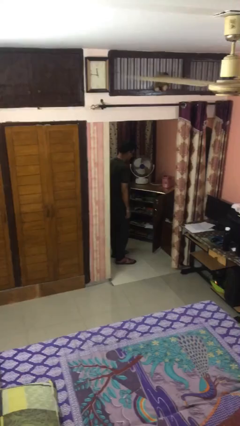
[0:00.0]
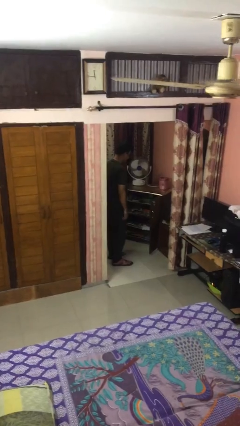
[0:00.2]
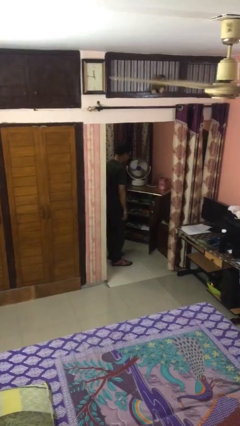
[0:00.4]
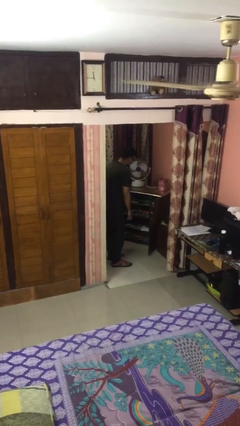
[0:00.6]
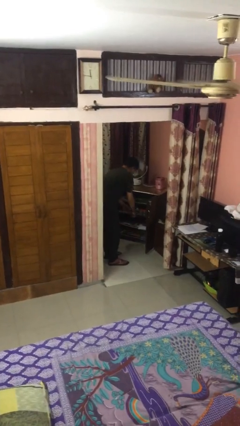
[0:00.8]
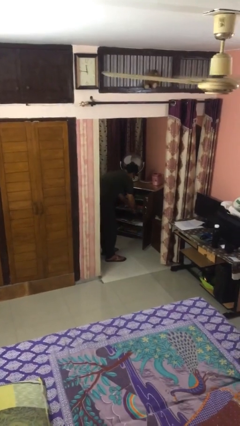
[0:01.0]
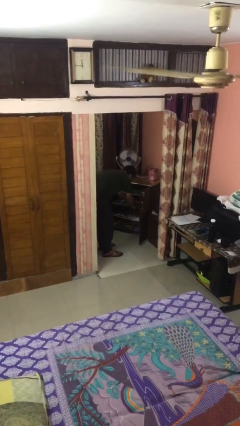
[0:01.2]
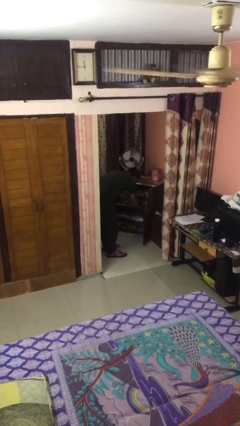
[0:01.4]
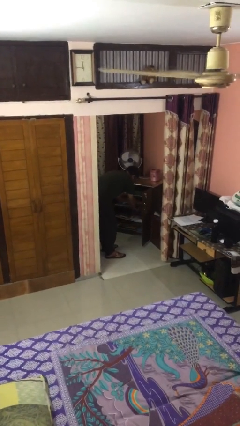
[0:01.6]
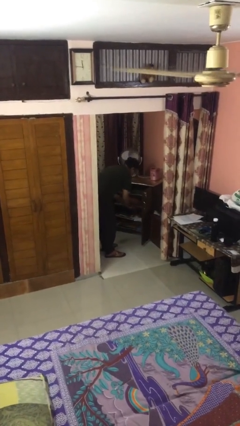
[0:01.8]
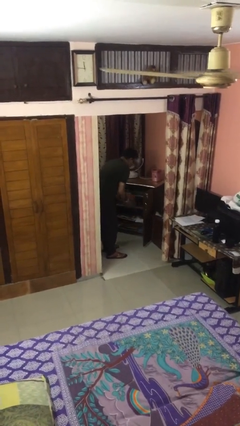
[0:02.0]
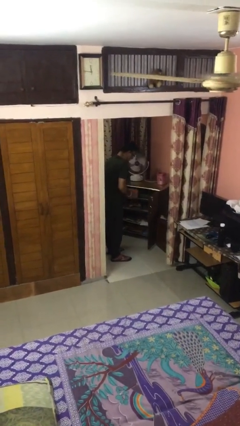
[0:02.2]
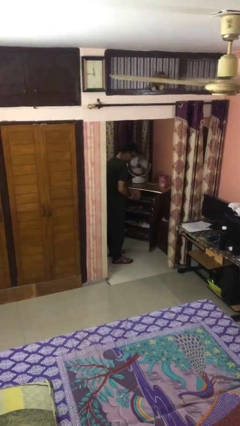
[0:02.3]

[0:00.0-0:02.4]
person picks up object from cabinet

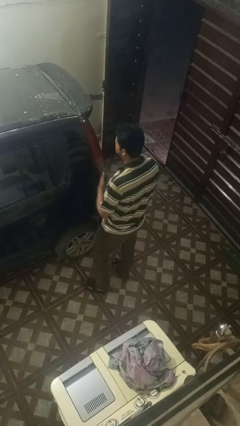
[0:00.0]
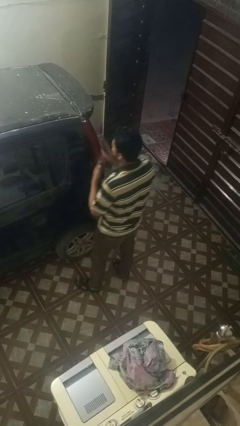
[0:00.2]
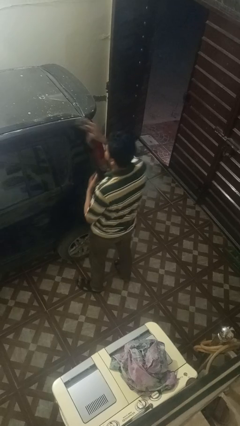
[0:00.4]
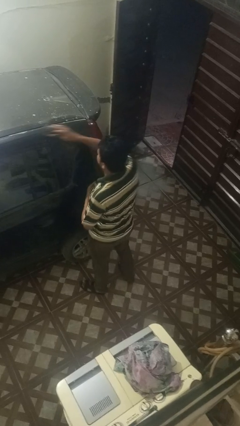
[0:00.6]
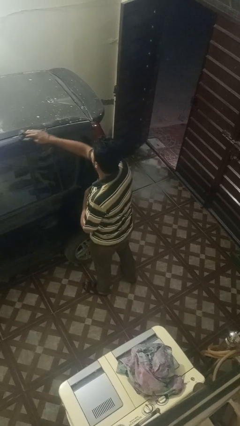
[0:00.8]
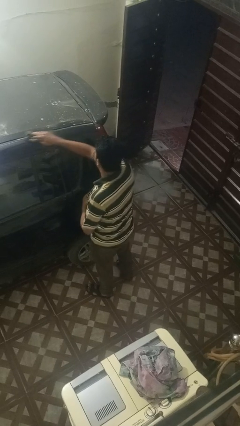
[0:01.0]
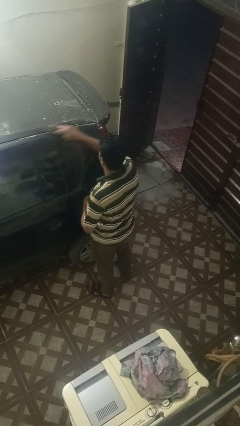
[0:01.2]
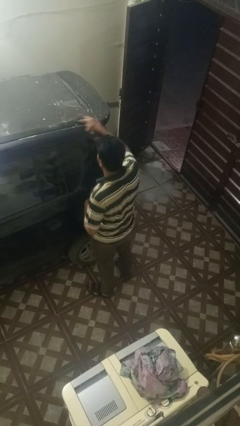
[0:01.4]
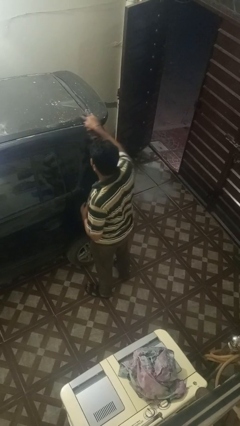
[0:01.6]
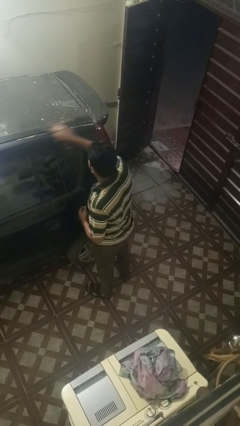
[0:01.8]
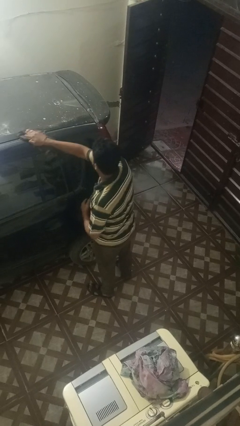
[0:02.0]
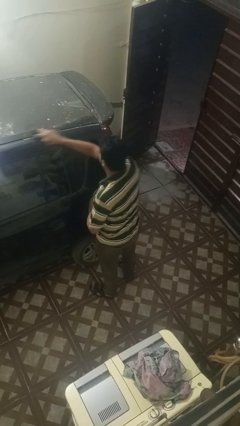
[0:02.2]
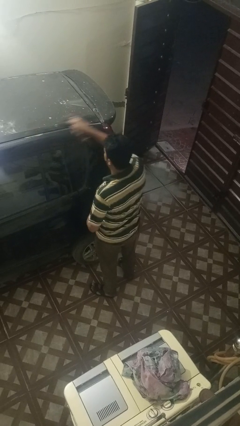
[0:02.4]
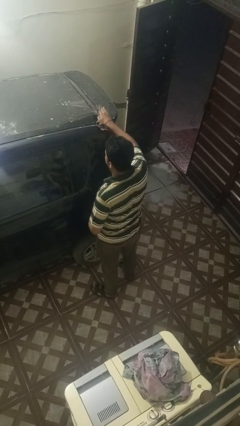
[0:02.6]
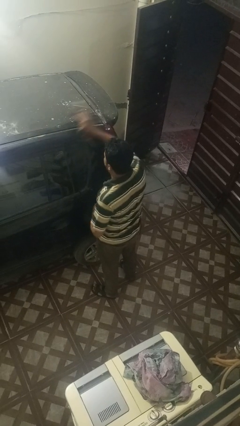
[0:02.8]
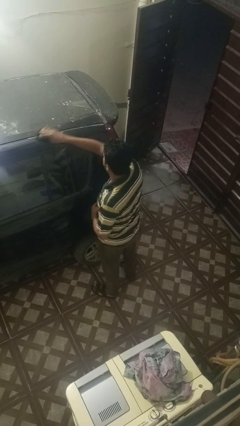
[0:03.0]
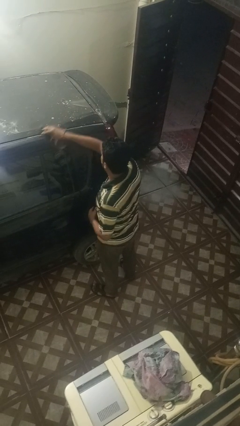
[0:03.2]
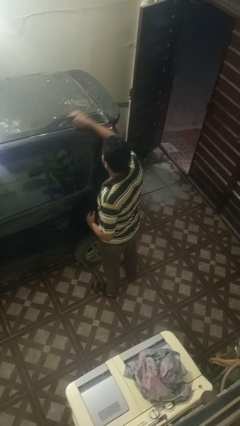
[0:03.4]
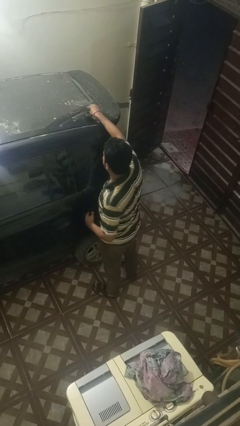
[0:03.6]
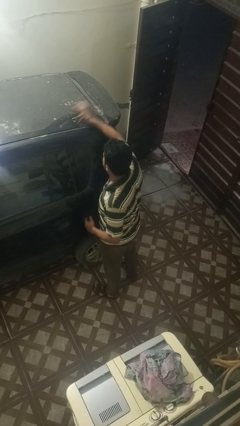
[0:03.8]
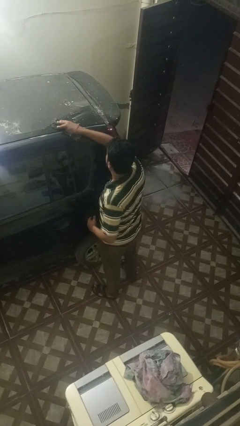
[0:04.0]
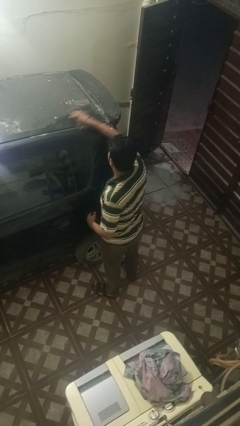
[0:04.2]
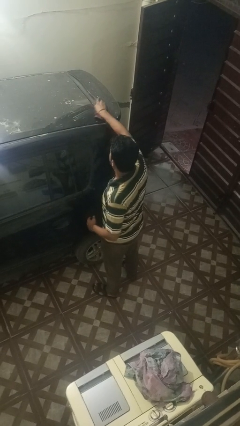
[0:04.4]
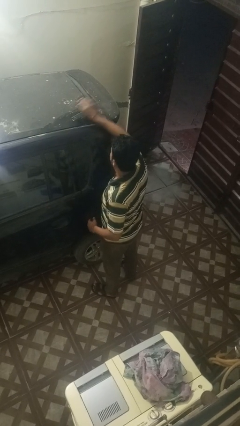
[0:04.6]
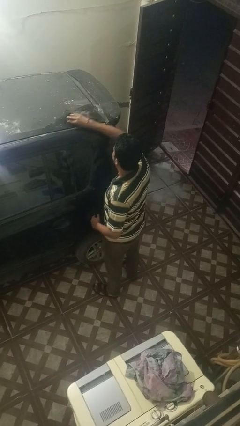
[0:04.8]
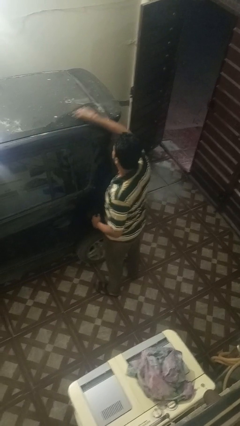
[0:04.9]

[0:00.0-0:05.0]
person polishes car with rag

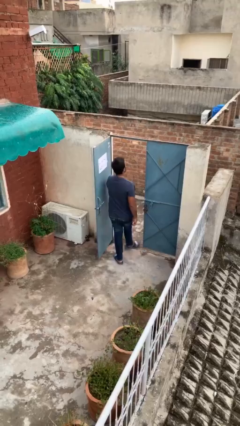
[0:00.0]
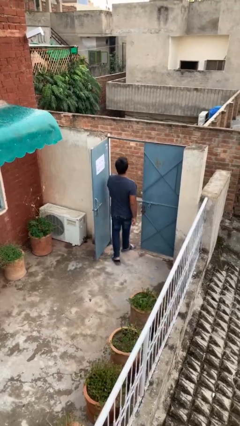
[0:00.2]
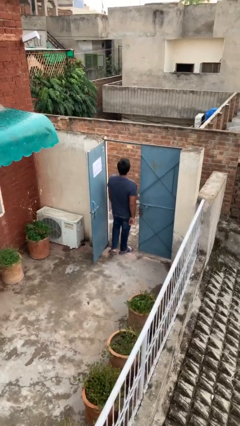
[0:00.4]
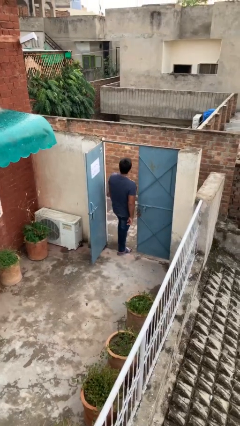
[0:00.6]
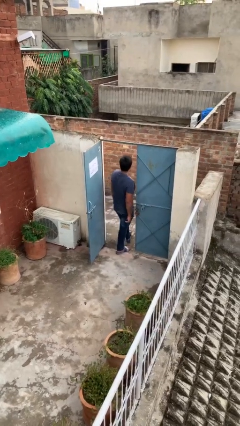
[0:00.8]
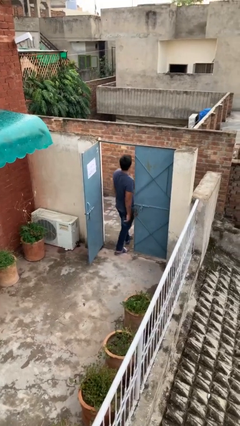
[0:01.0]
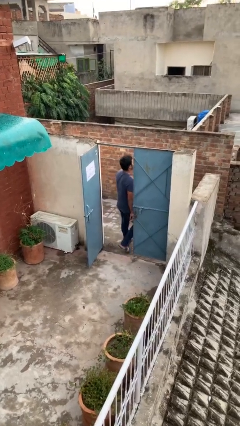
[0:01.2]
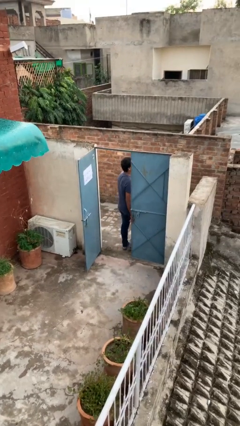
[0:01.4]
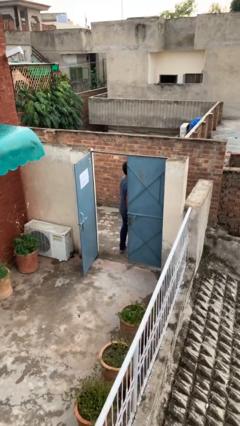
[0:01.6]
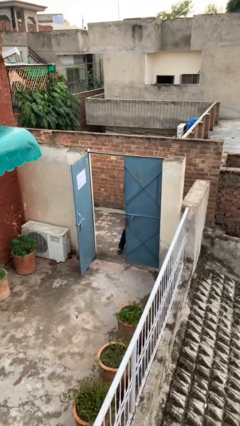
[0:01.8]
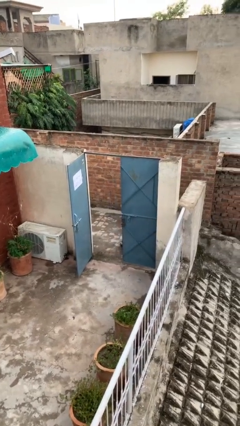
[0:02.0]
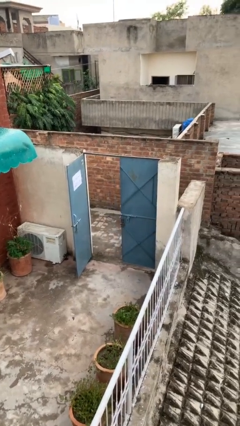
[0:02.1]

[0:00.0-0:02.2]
person exits scene through structure

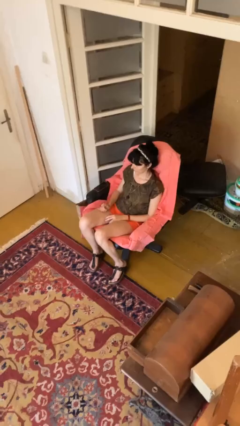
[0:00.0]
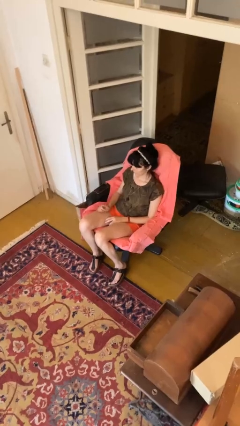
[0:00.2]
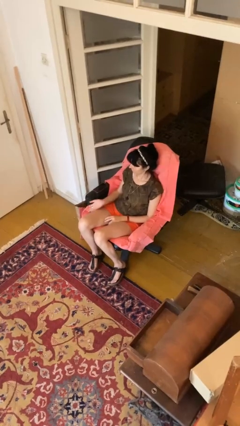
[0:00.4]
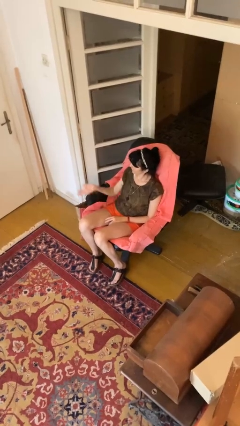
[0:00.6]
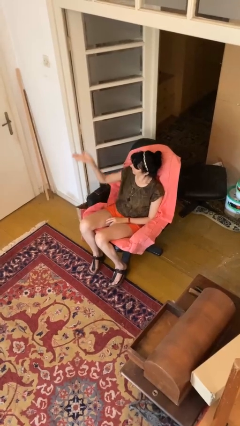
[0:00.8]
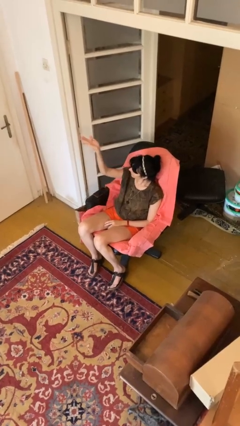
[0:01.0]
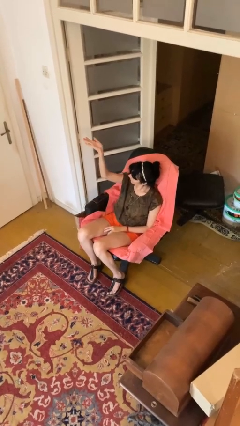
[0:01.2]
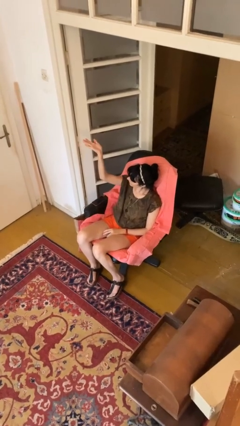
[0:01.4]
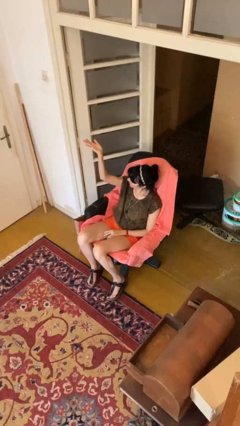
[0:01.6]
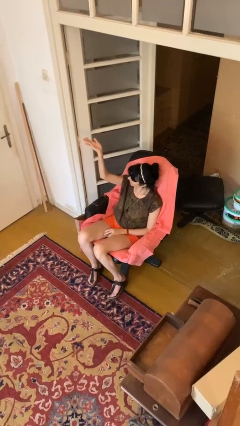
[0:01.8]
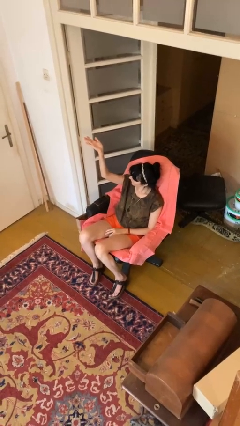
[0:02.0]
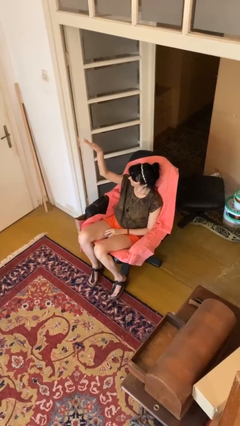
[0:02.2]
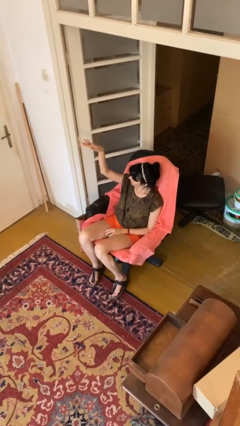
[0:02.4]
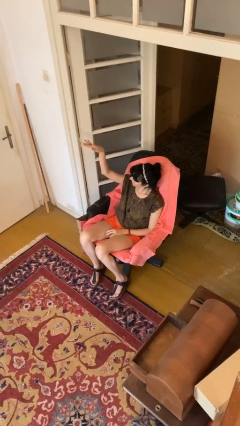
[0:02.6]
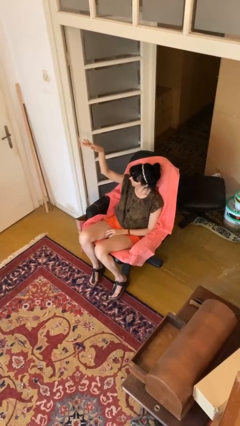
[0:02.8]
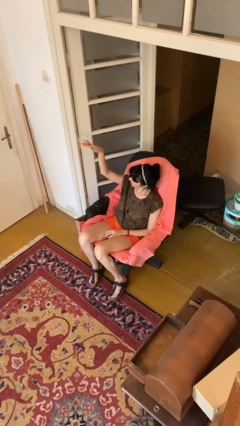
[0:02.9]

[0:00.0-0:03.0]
person gestures swipe up

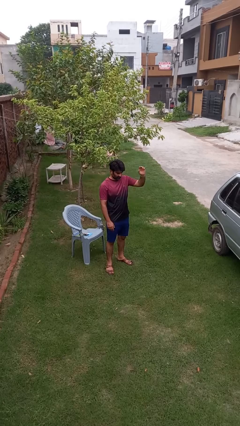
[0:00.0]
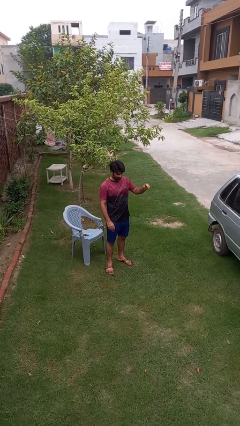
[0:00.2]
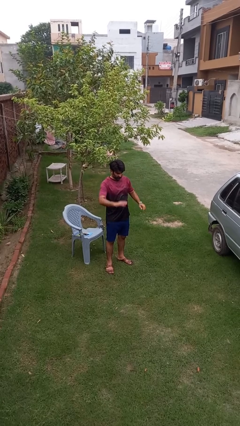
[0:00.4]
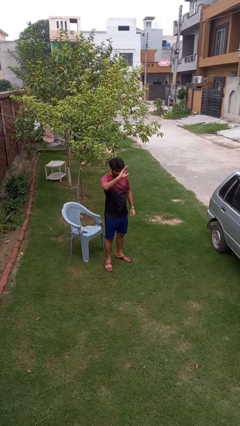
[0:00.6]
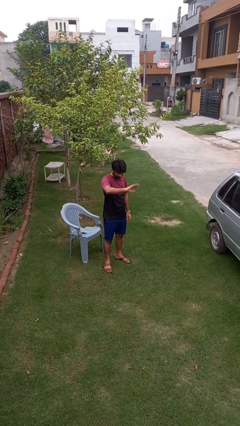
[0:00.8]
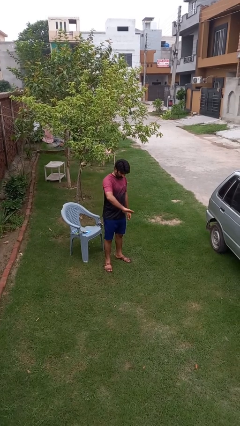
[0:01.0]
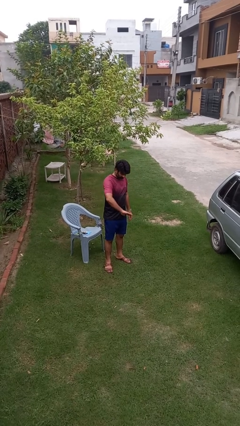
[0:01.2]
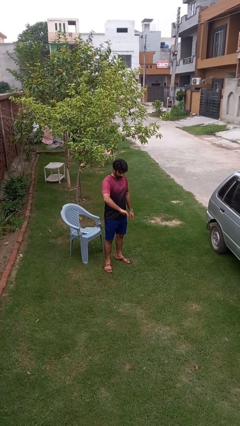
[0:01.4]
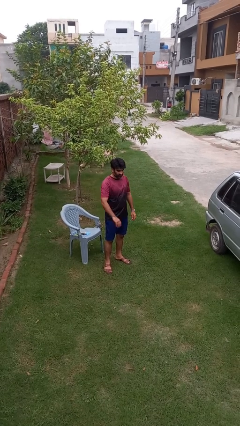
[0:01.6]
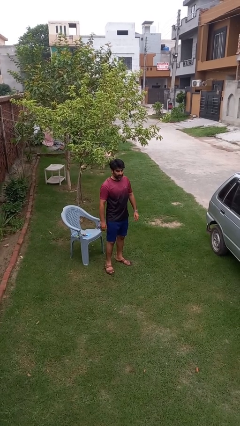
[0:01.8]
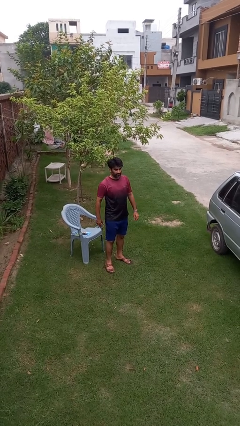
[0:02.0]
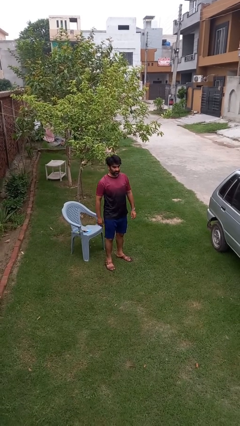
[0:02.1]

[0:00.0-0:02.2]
person gestures swipe down

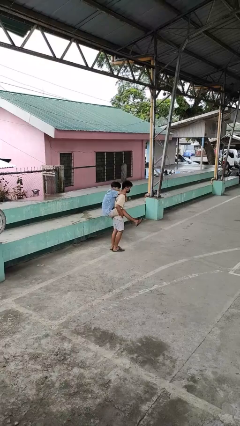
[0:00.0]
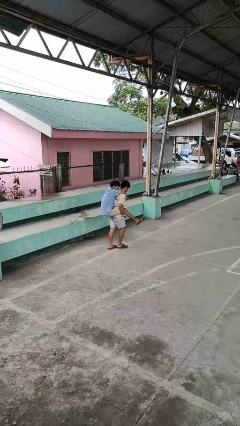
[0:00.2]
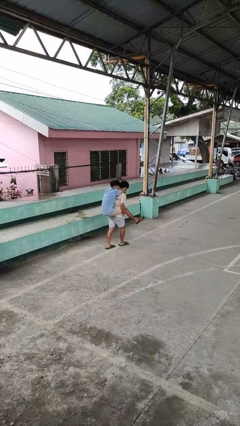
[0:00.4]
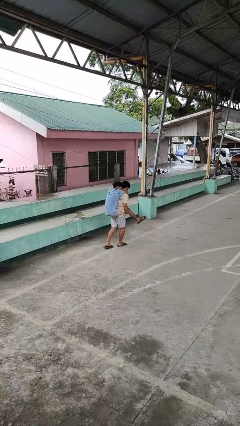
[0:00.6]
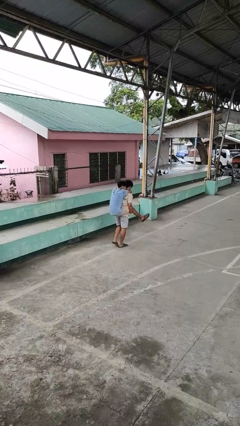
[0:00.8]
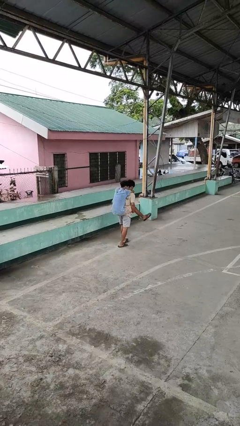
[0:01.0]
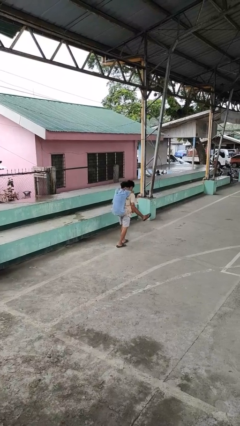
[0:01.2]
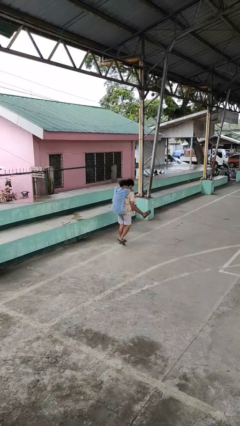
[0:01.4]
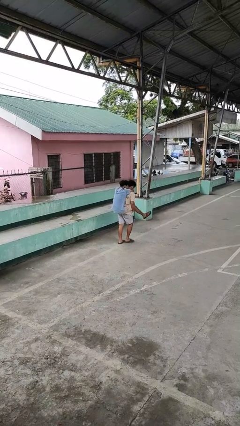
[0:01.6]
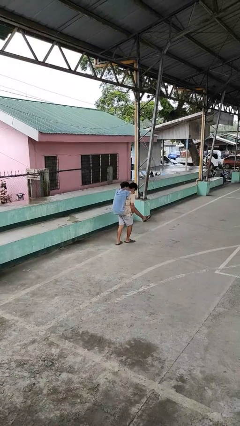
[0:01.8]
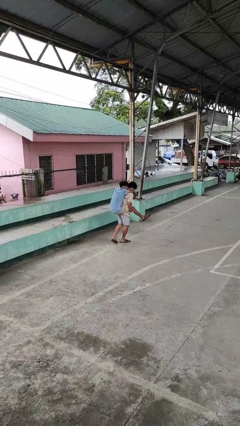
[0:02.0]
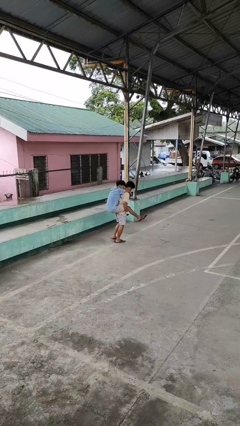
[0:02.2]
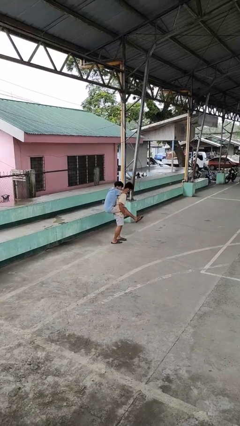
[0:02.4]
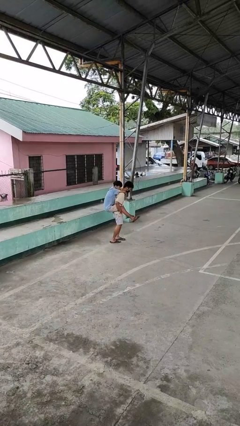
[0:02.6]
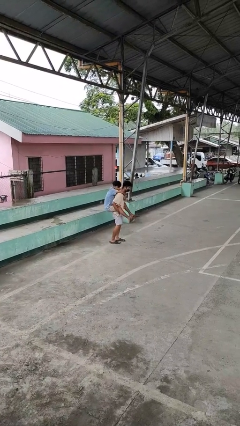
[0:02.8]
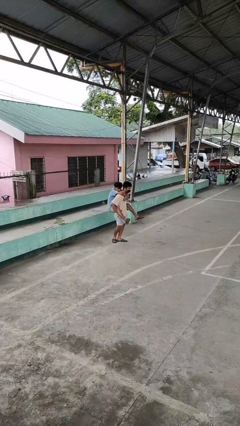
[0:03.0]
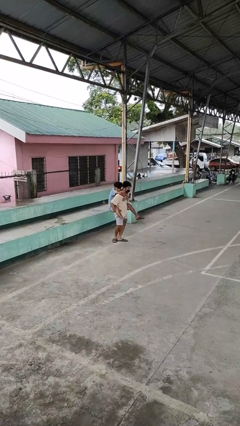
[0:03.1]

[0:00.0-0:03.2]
person carries person on back
